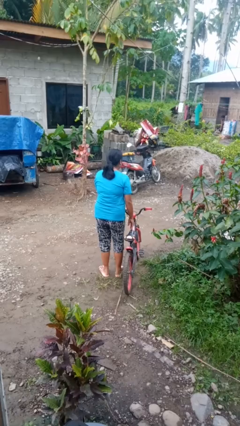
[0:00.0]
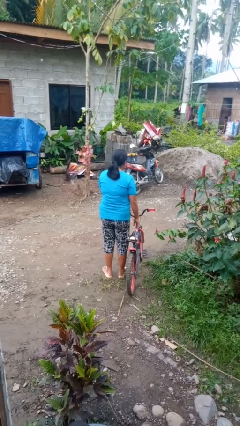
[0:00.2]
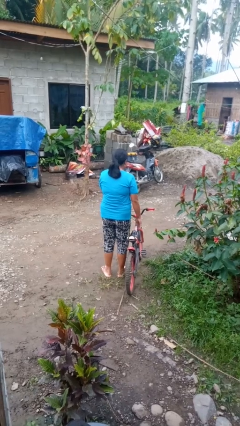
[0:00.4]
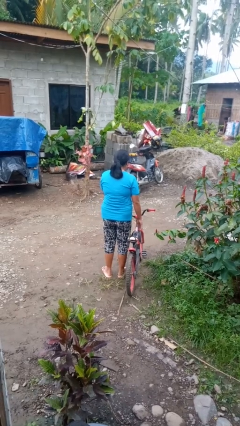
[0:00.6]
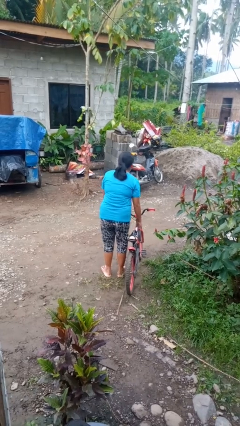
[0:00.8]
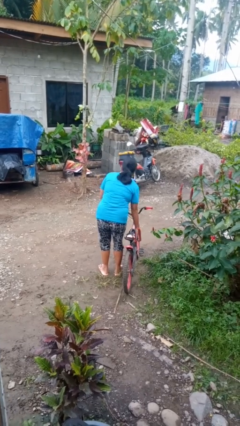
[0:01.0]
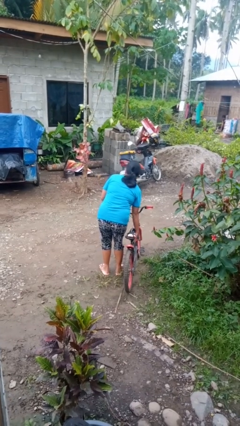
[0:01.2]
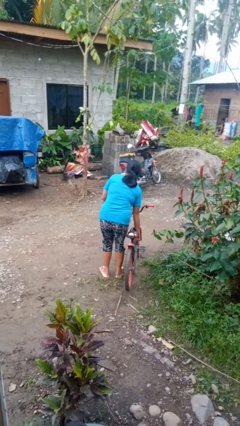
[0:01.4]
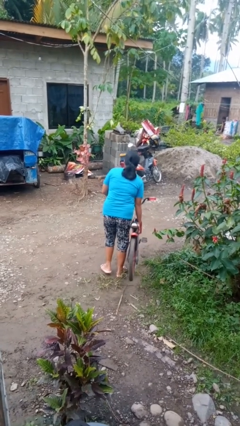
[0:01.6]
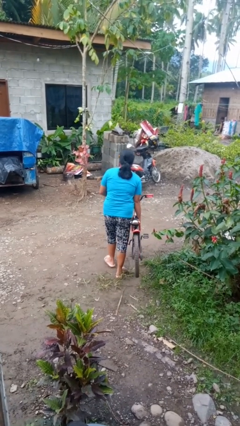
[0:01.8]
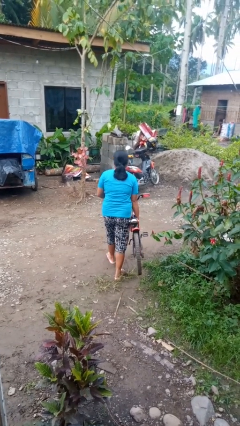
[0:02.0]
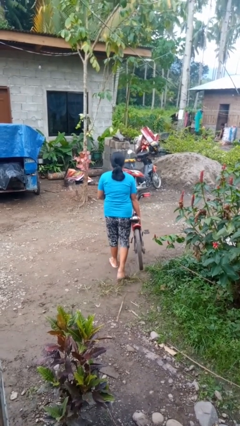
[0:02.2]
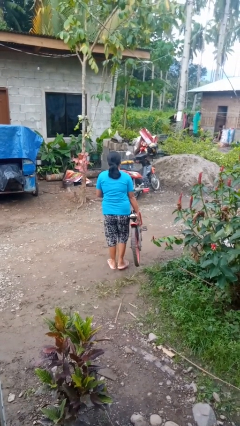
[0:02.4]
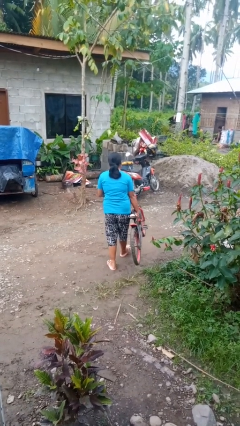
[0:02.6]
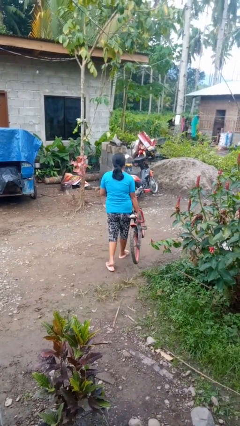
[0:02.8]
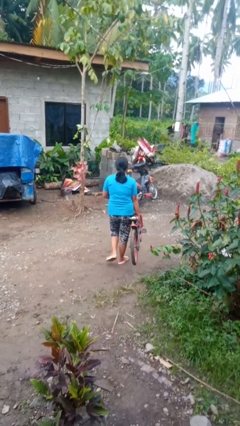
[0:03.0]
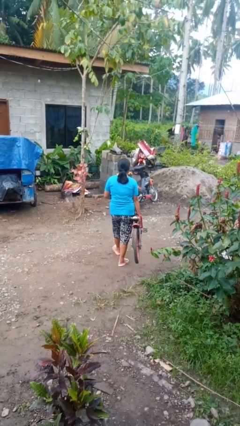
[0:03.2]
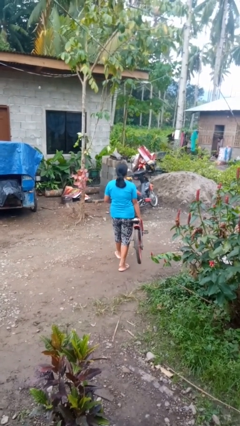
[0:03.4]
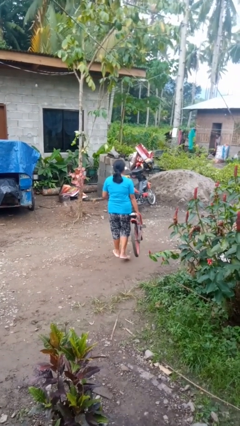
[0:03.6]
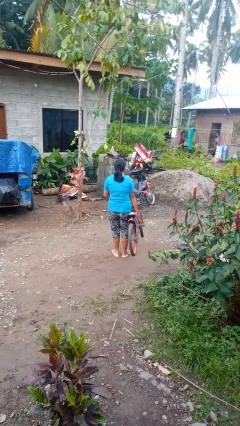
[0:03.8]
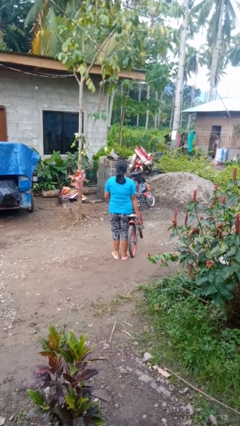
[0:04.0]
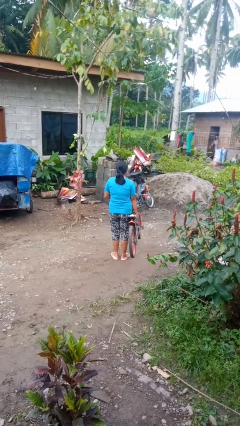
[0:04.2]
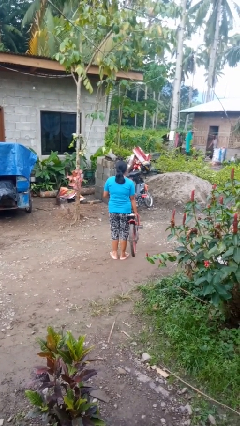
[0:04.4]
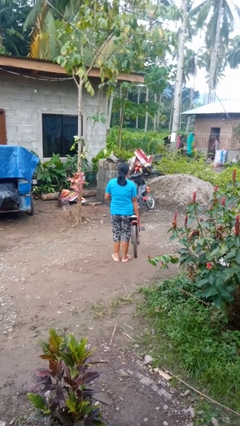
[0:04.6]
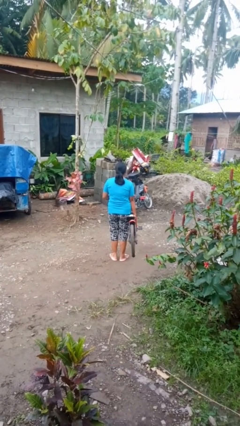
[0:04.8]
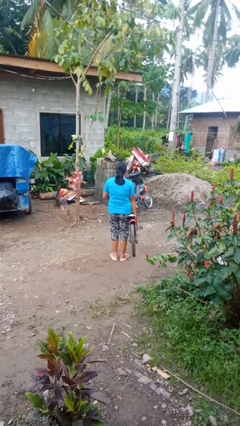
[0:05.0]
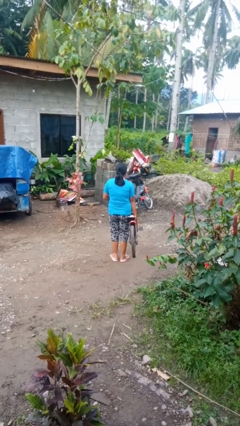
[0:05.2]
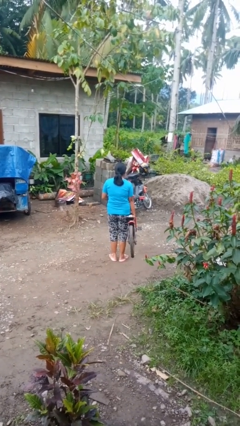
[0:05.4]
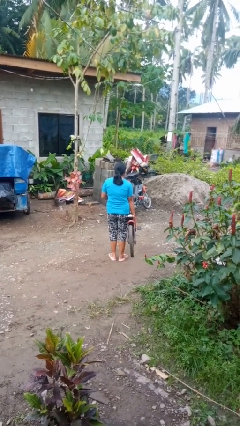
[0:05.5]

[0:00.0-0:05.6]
person carries bicycle

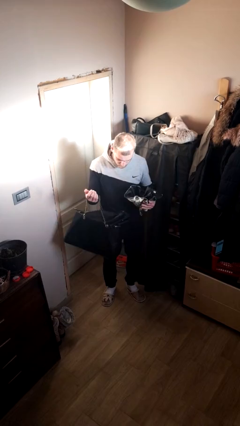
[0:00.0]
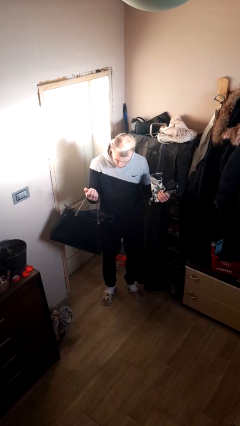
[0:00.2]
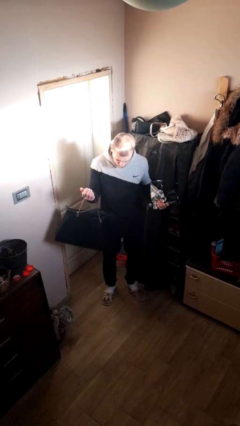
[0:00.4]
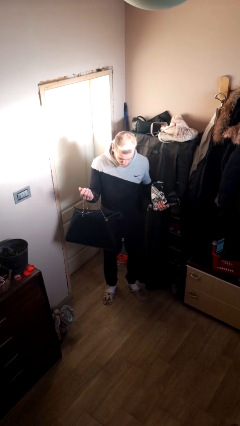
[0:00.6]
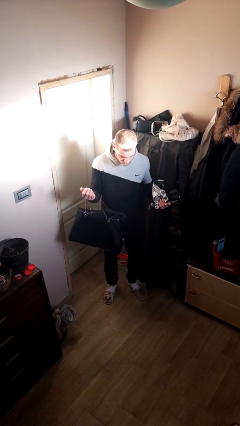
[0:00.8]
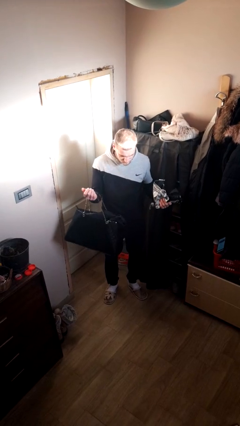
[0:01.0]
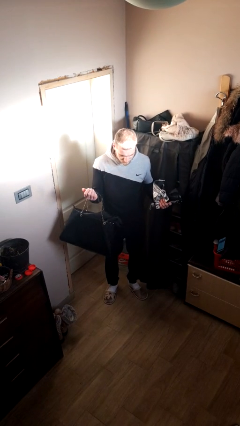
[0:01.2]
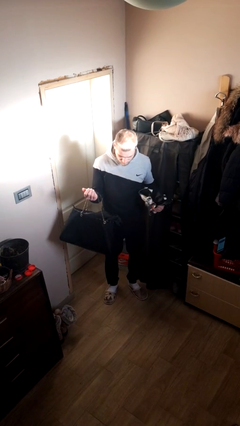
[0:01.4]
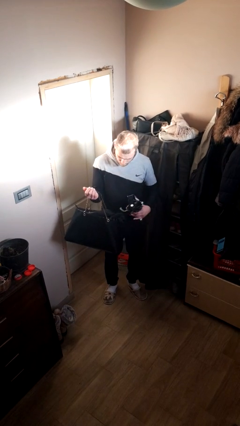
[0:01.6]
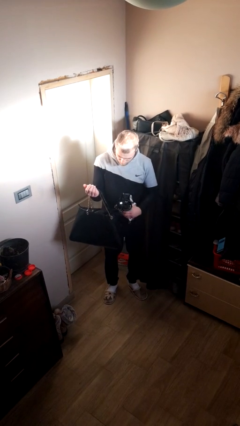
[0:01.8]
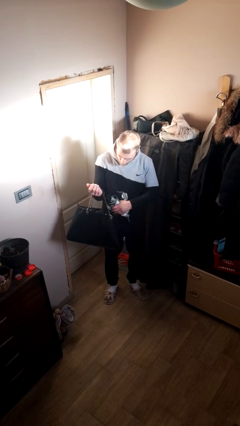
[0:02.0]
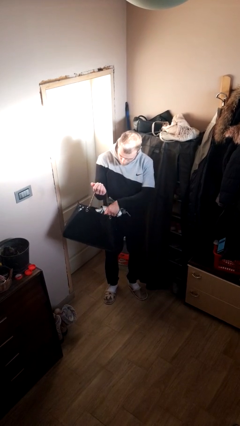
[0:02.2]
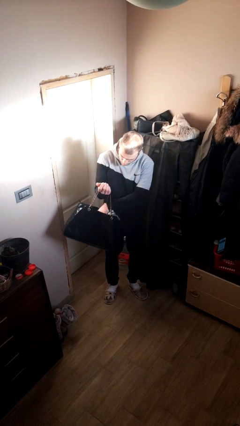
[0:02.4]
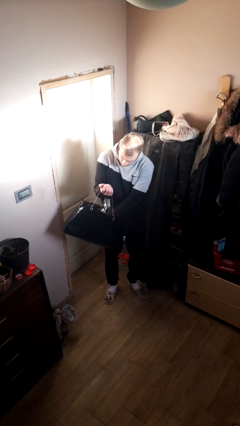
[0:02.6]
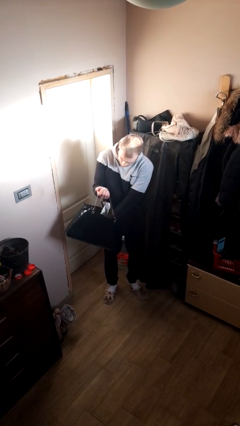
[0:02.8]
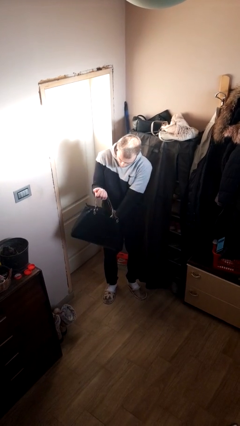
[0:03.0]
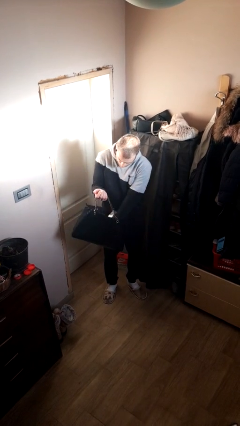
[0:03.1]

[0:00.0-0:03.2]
person takes object from purse

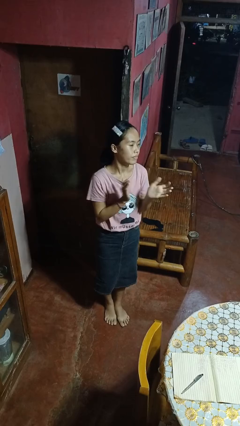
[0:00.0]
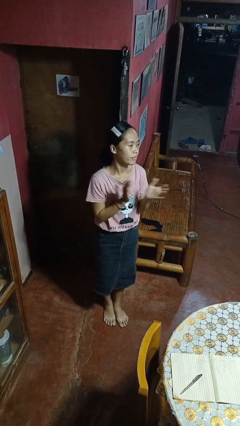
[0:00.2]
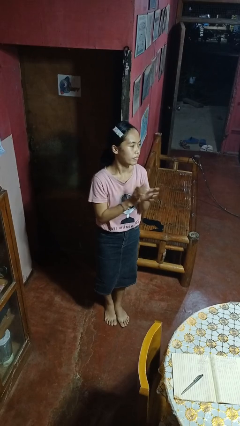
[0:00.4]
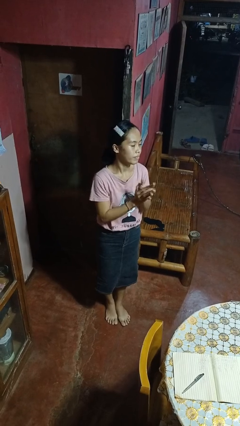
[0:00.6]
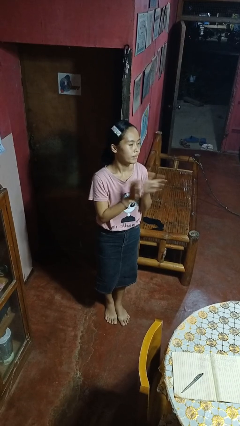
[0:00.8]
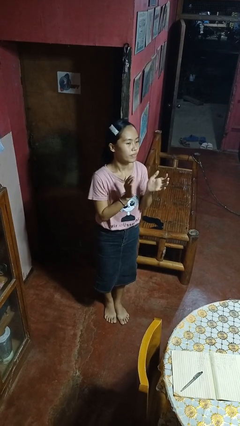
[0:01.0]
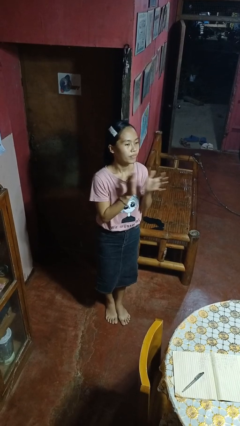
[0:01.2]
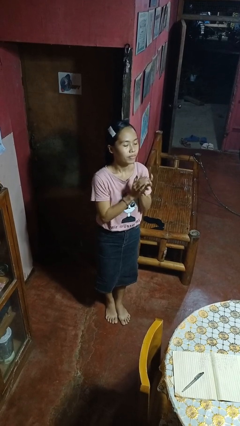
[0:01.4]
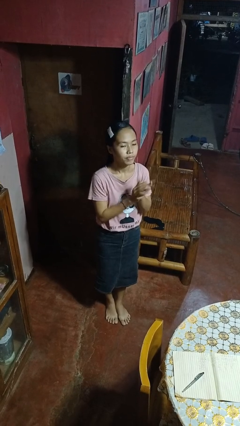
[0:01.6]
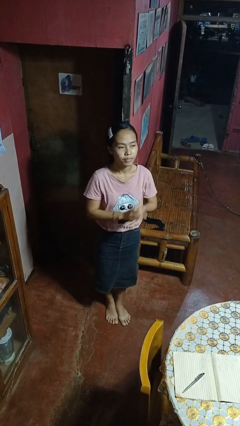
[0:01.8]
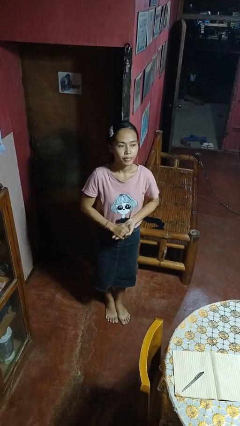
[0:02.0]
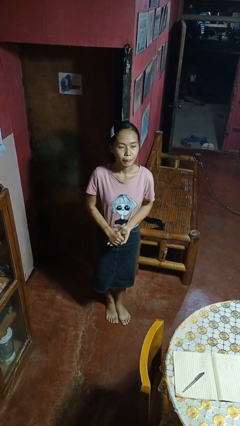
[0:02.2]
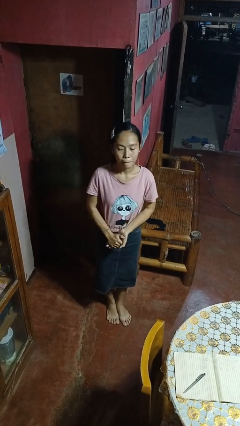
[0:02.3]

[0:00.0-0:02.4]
person claps hands

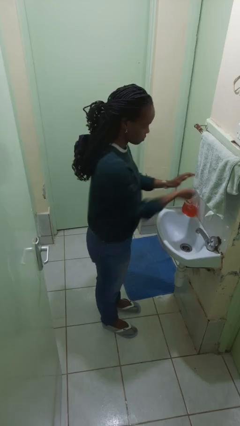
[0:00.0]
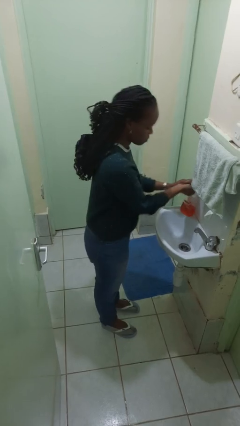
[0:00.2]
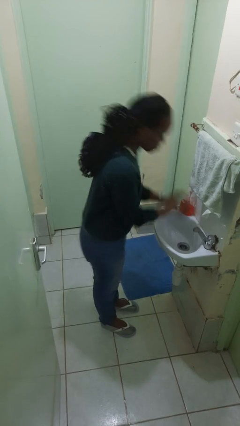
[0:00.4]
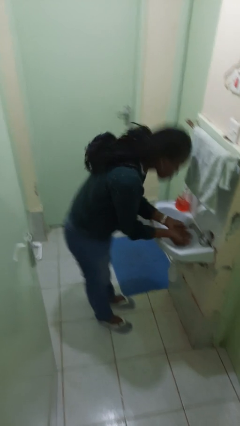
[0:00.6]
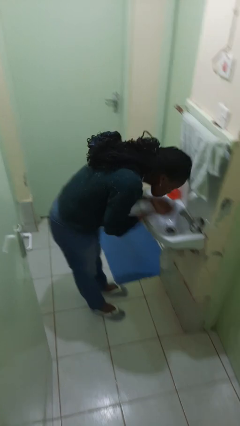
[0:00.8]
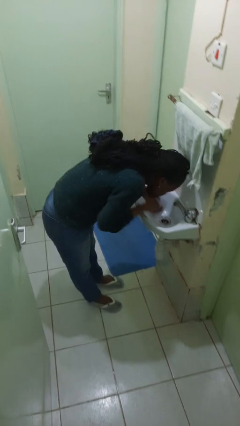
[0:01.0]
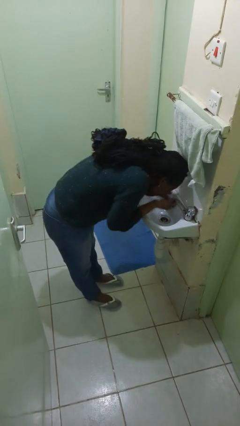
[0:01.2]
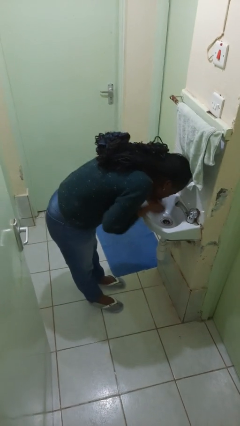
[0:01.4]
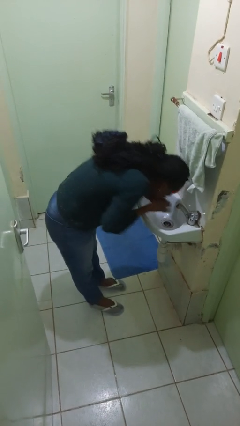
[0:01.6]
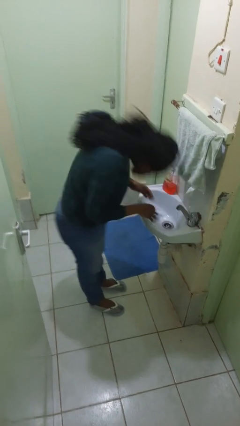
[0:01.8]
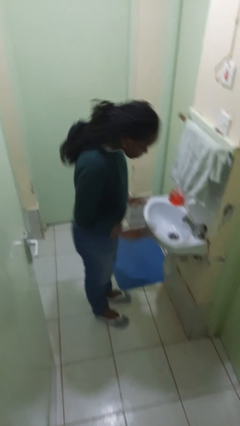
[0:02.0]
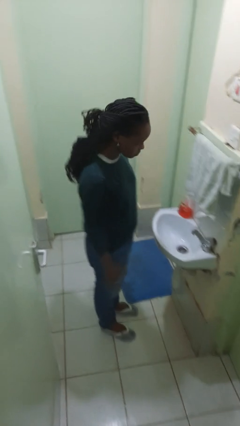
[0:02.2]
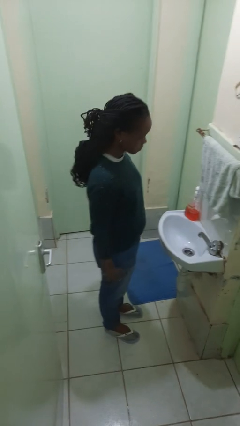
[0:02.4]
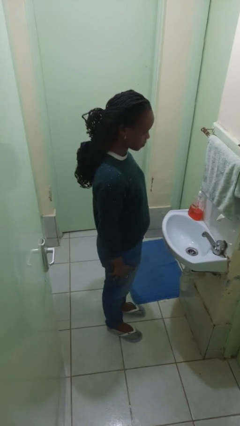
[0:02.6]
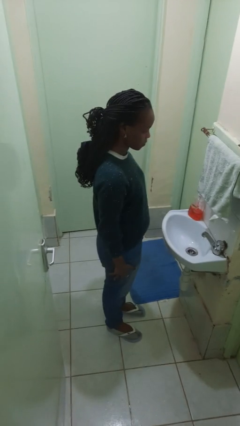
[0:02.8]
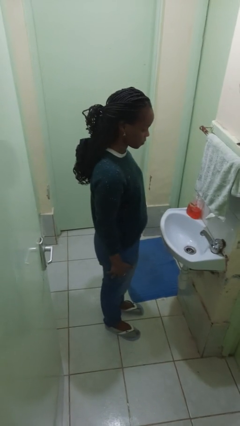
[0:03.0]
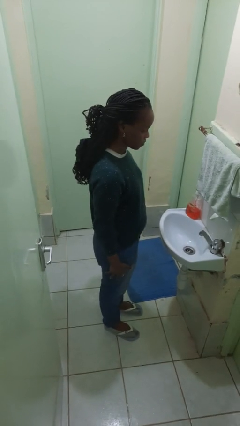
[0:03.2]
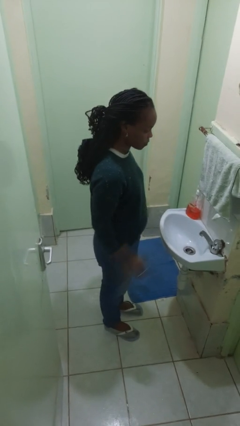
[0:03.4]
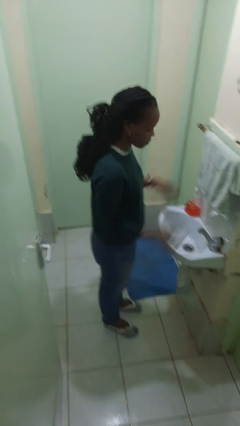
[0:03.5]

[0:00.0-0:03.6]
person washes face

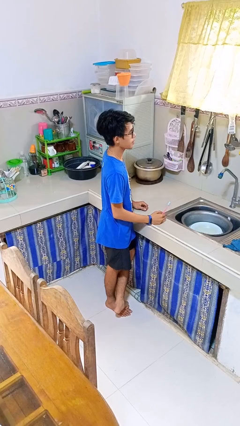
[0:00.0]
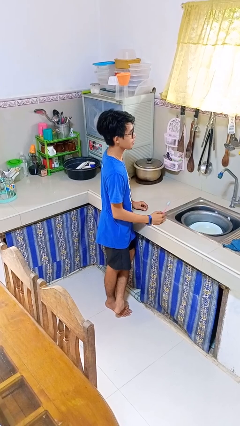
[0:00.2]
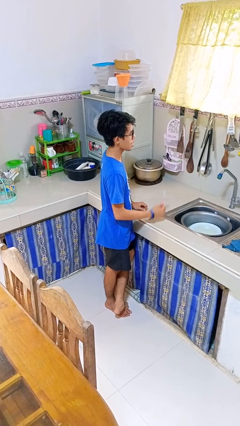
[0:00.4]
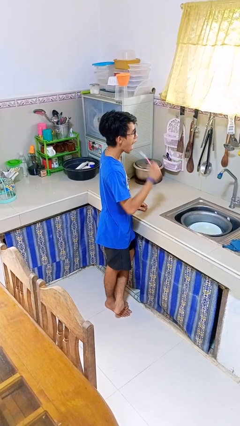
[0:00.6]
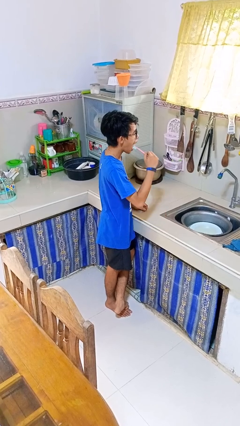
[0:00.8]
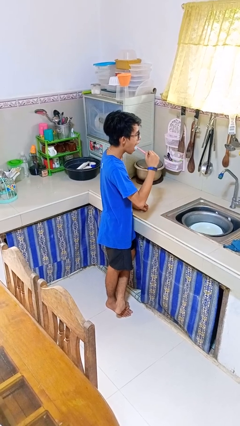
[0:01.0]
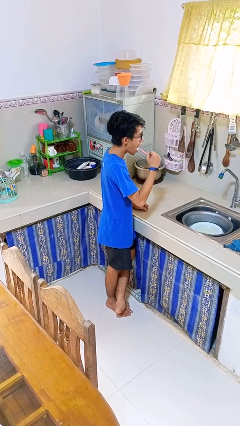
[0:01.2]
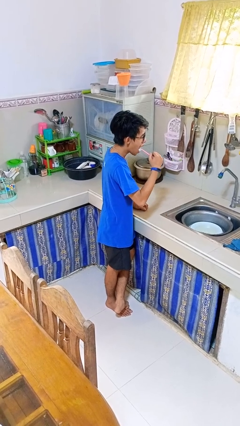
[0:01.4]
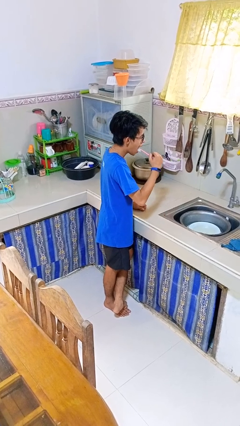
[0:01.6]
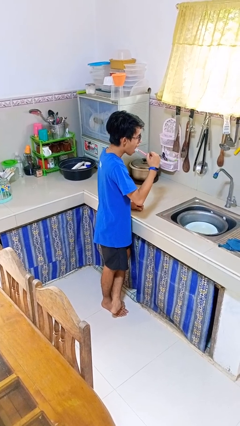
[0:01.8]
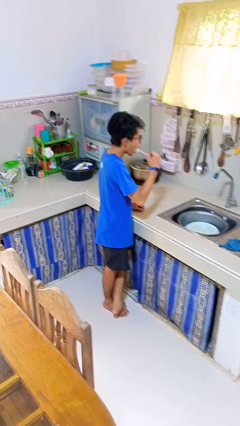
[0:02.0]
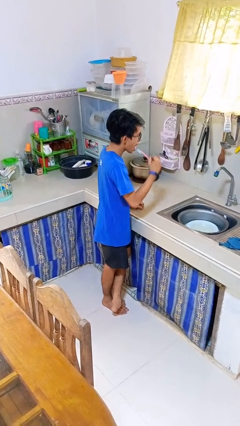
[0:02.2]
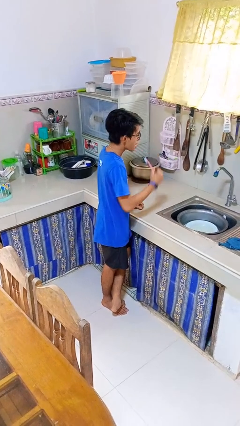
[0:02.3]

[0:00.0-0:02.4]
person brushes teeth
